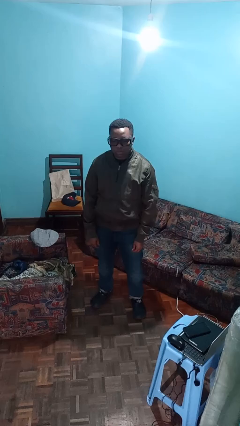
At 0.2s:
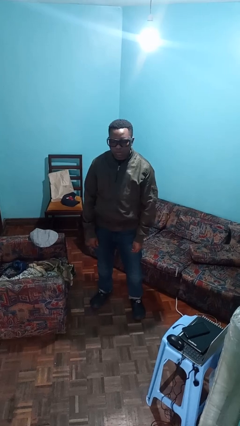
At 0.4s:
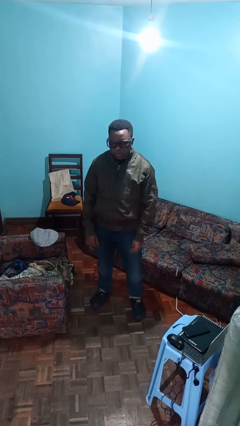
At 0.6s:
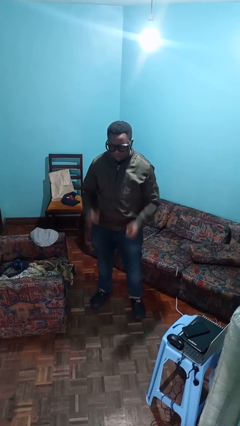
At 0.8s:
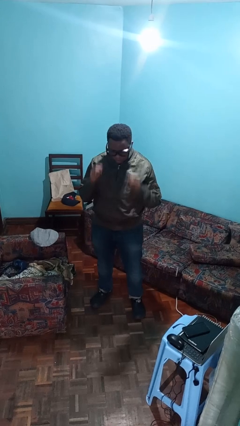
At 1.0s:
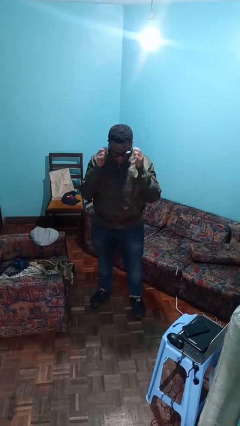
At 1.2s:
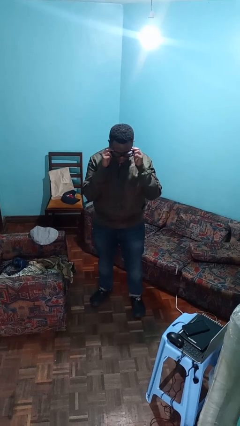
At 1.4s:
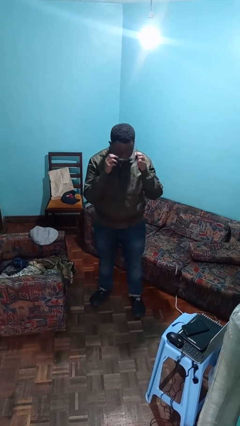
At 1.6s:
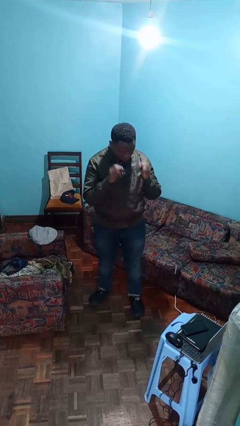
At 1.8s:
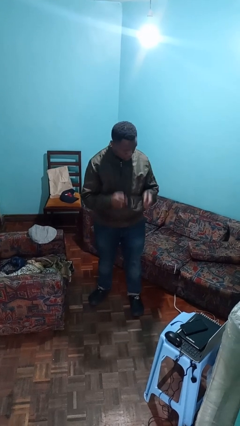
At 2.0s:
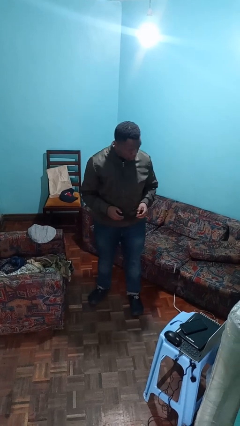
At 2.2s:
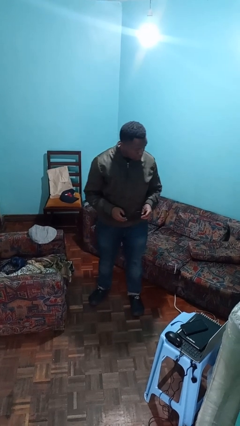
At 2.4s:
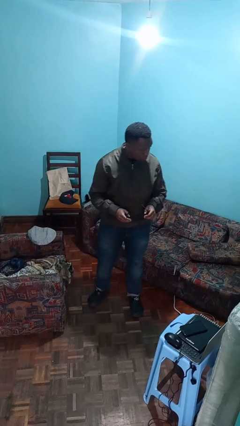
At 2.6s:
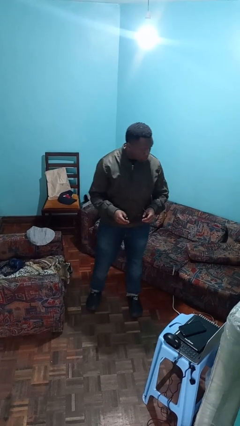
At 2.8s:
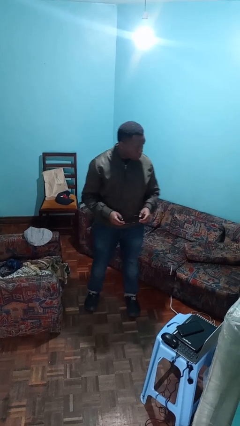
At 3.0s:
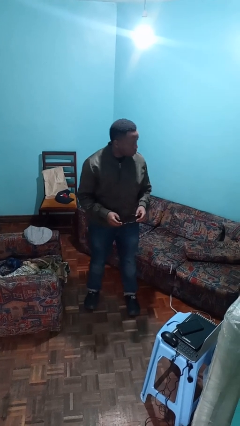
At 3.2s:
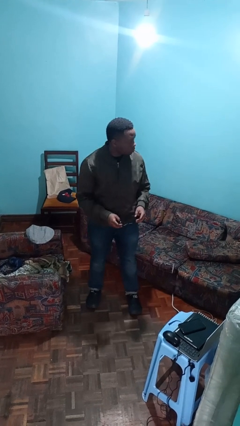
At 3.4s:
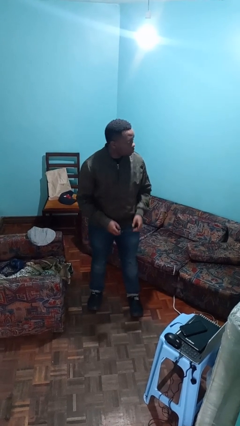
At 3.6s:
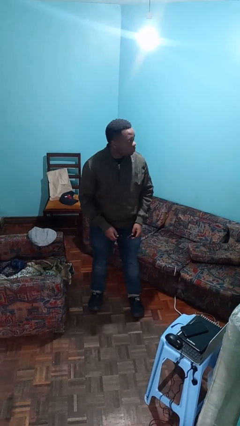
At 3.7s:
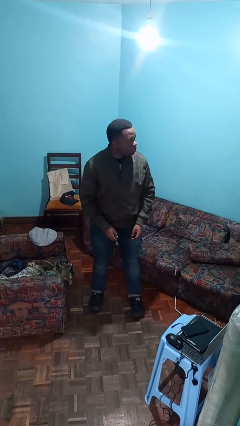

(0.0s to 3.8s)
person takes off glasses

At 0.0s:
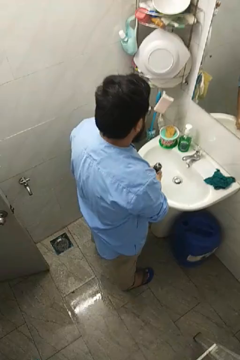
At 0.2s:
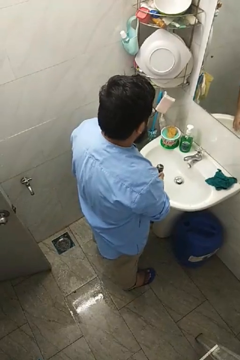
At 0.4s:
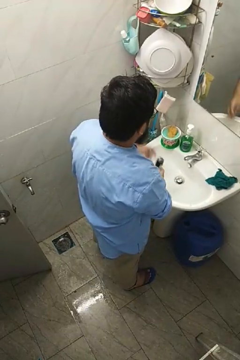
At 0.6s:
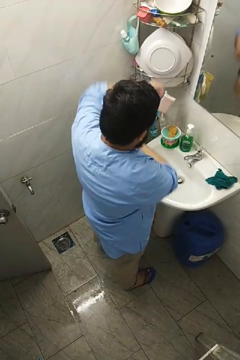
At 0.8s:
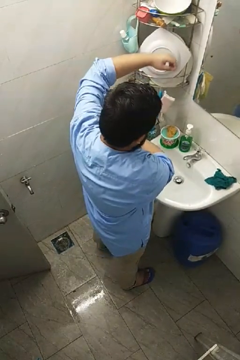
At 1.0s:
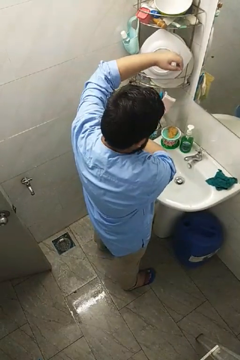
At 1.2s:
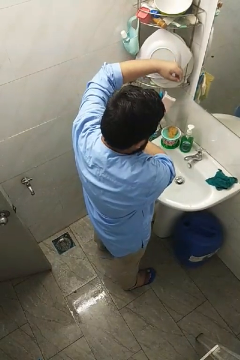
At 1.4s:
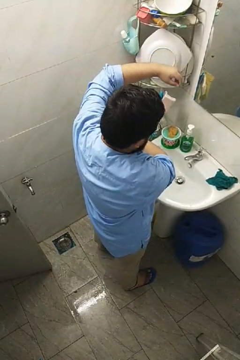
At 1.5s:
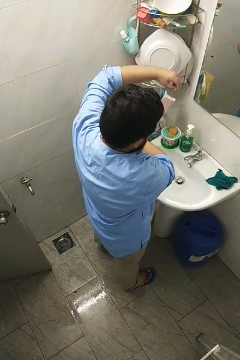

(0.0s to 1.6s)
person applies deodorant

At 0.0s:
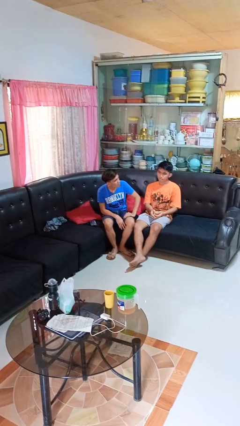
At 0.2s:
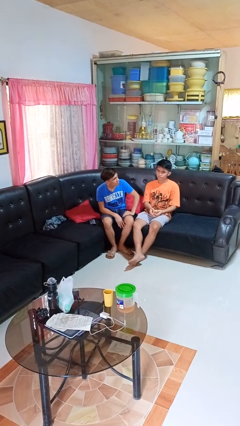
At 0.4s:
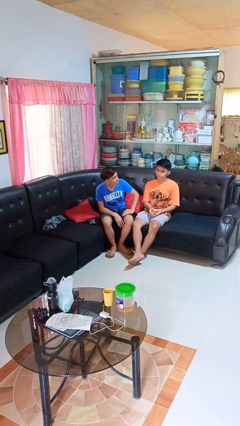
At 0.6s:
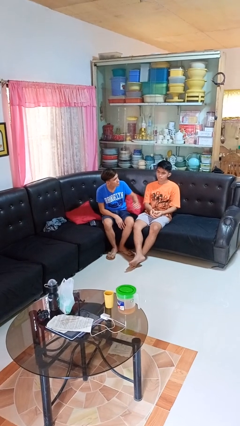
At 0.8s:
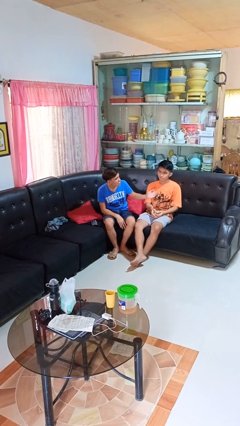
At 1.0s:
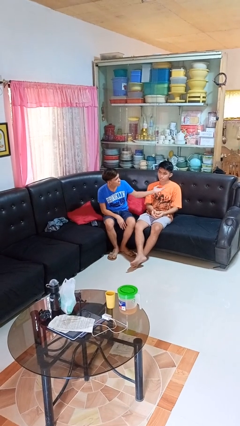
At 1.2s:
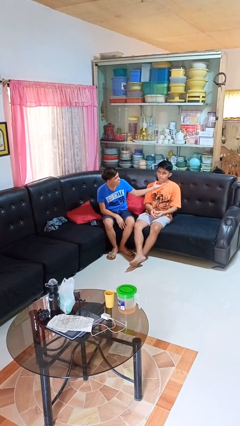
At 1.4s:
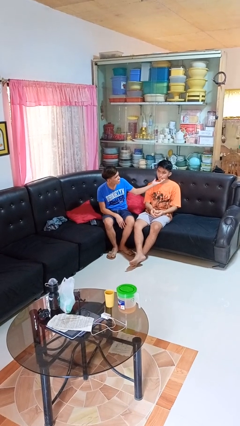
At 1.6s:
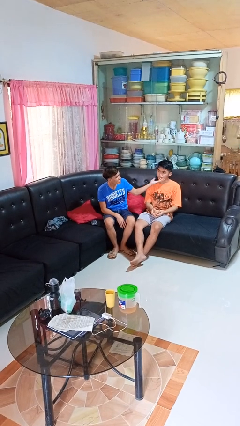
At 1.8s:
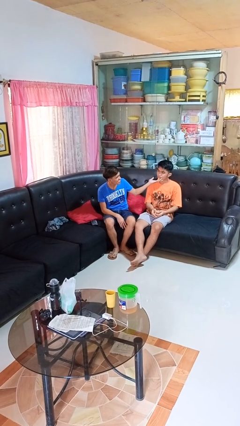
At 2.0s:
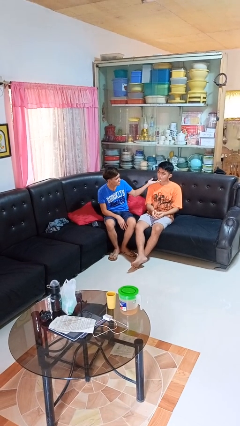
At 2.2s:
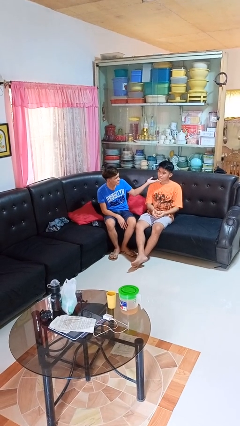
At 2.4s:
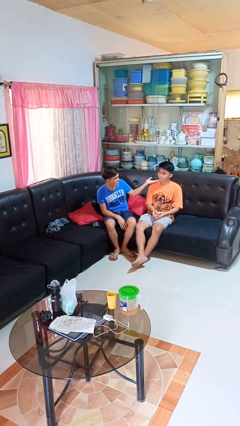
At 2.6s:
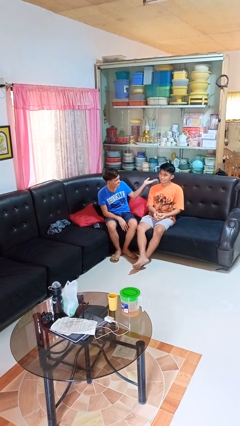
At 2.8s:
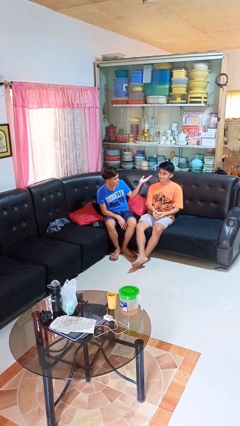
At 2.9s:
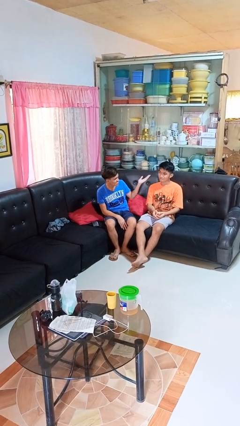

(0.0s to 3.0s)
person touches face of person

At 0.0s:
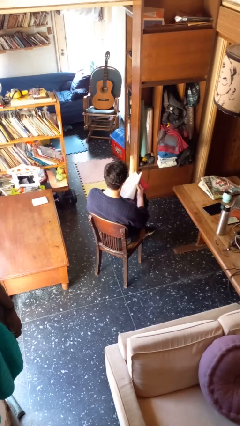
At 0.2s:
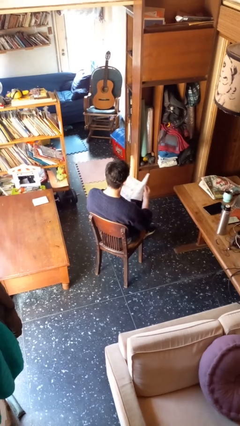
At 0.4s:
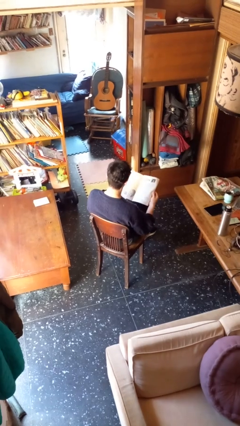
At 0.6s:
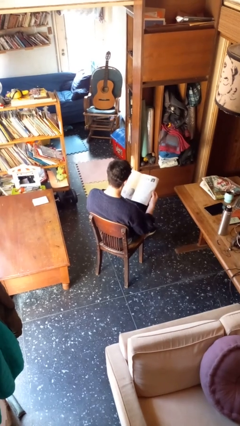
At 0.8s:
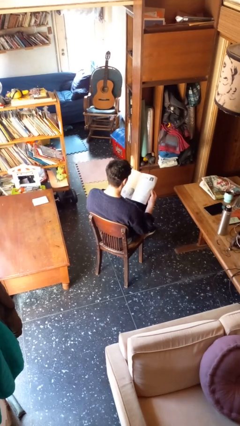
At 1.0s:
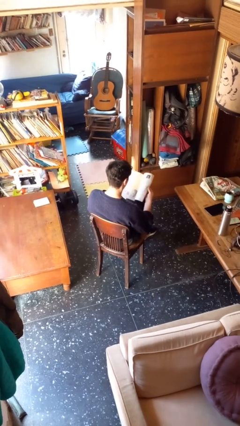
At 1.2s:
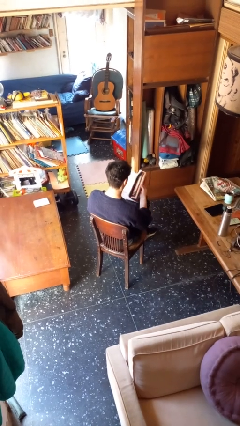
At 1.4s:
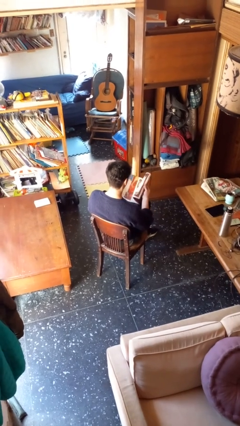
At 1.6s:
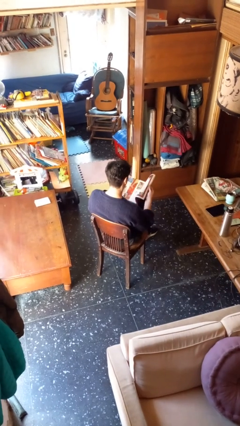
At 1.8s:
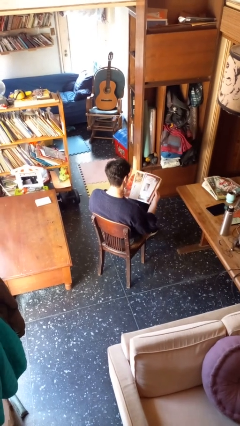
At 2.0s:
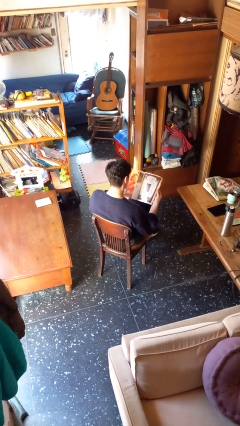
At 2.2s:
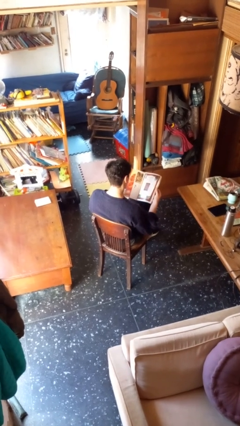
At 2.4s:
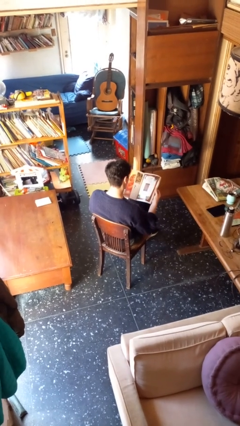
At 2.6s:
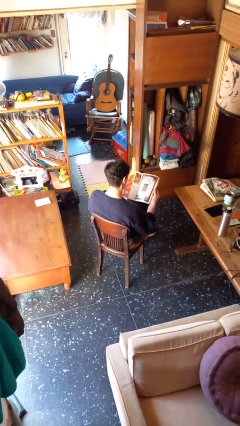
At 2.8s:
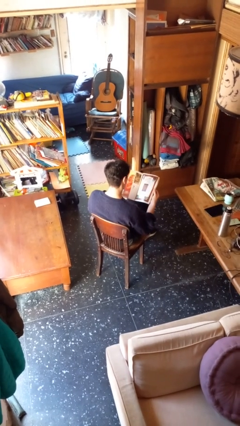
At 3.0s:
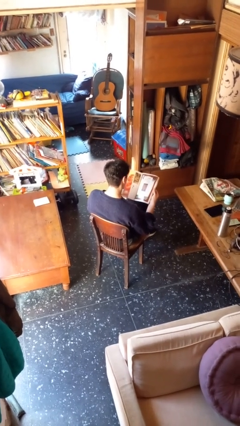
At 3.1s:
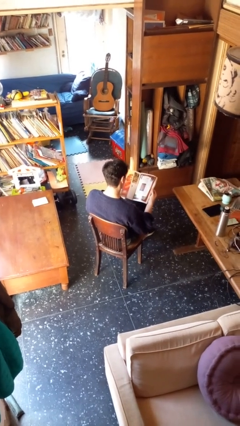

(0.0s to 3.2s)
person reads magazine

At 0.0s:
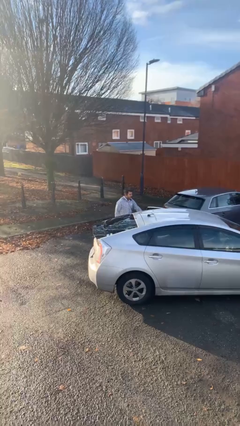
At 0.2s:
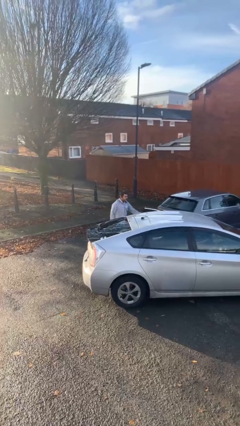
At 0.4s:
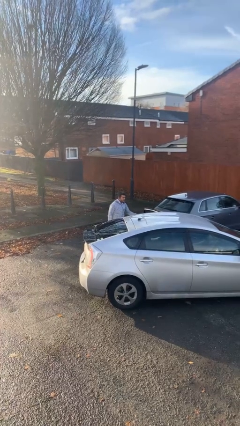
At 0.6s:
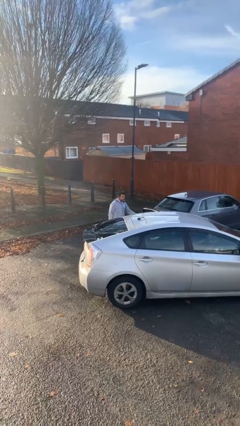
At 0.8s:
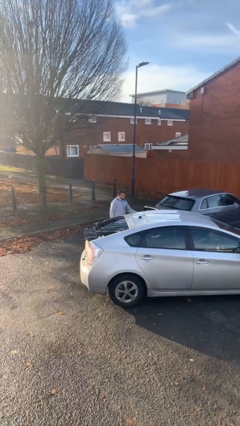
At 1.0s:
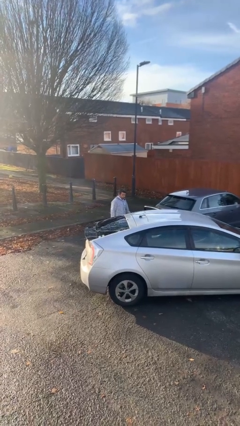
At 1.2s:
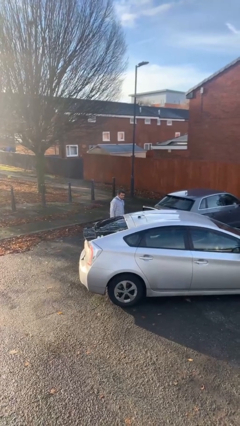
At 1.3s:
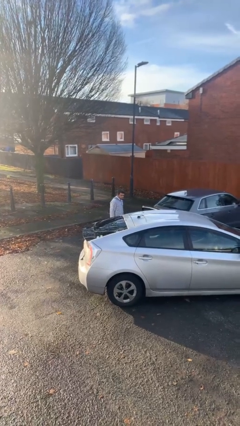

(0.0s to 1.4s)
person opens car door

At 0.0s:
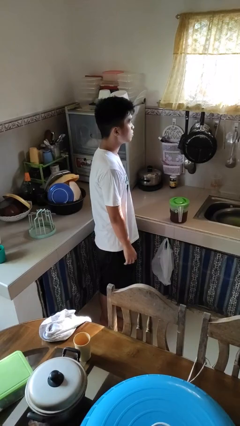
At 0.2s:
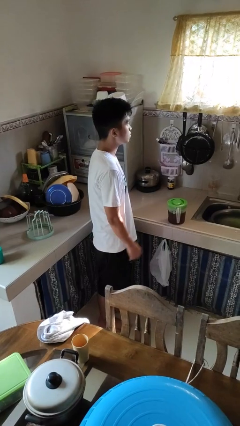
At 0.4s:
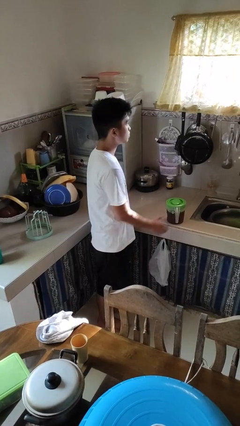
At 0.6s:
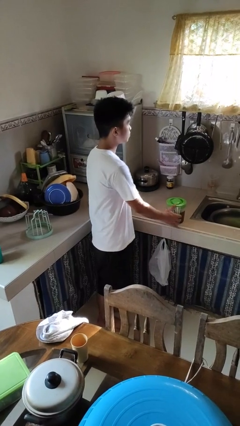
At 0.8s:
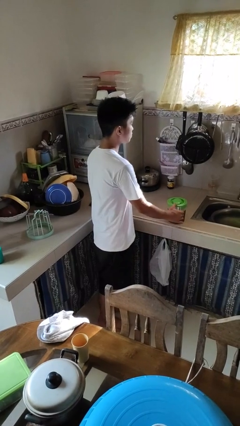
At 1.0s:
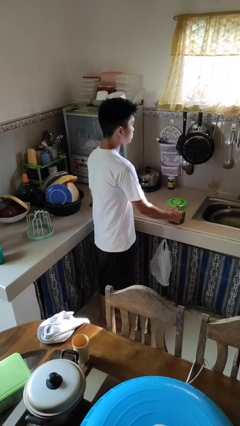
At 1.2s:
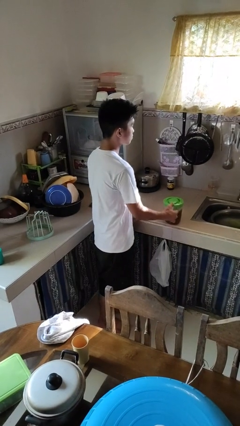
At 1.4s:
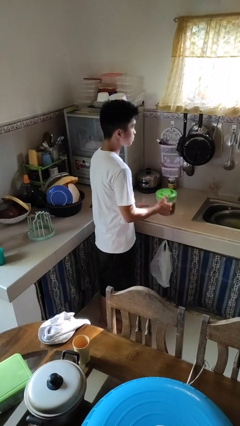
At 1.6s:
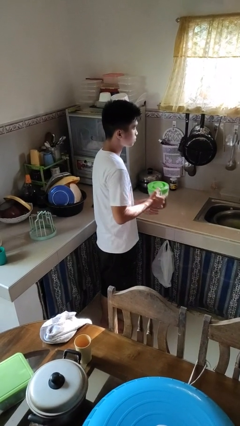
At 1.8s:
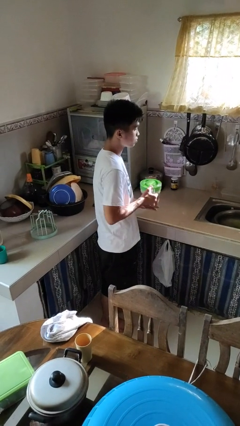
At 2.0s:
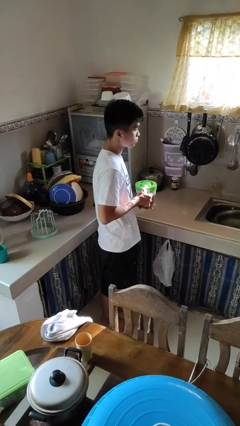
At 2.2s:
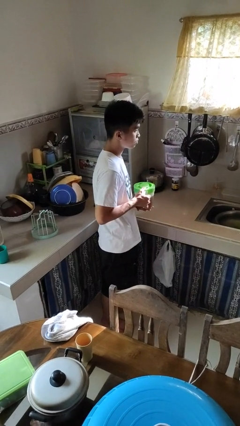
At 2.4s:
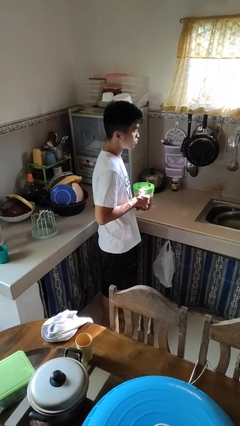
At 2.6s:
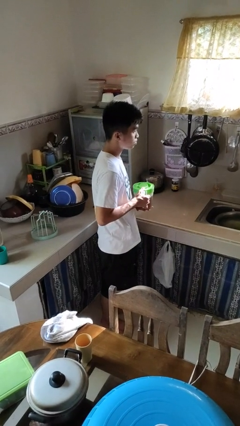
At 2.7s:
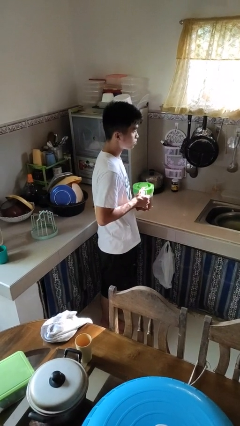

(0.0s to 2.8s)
person picks up object from countertop

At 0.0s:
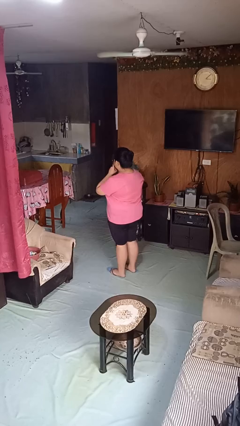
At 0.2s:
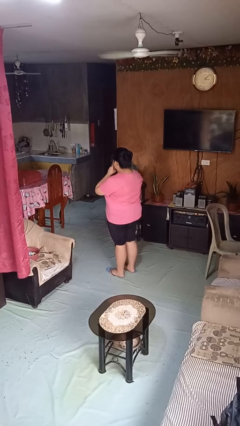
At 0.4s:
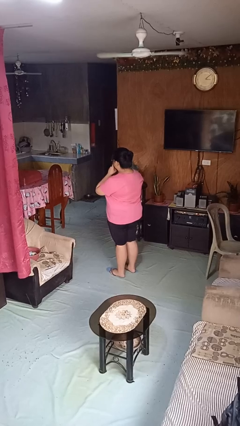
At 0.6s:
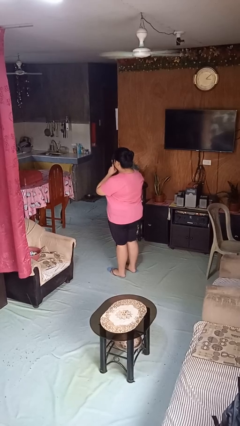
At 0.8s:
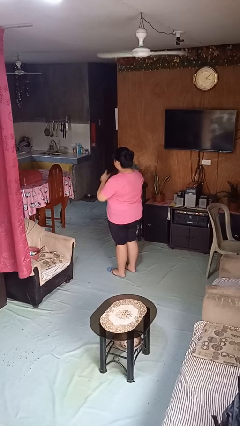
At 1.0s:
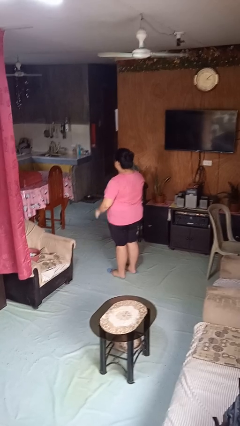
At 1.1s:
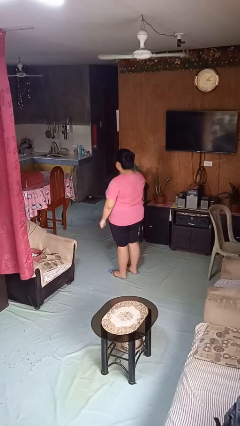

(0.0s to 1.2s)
person gestures be quiet

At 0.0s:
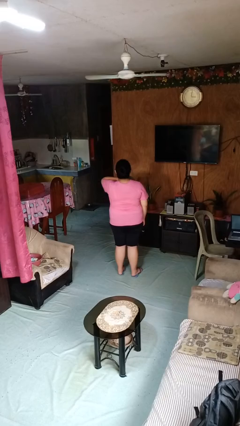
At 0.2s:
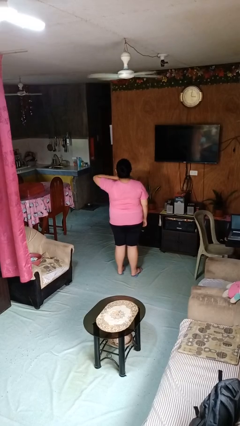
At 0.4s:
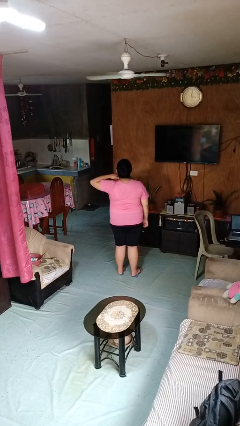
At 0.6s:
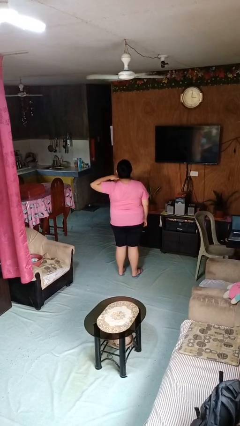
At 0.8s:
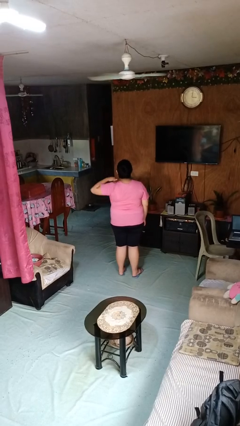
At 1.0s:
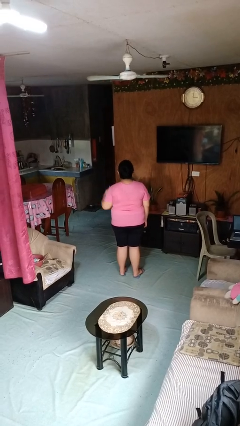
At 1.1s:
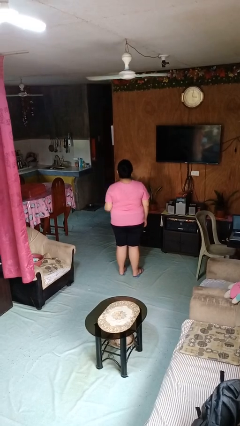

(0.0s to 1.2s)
person gestures cut
